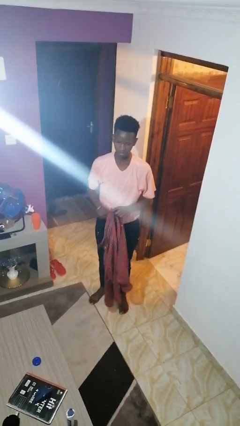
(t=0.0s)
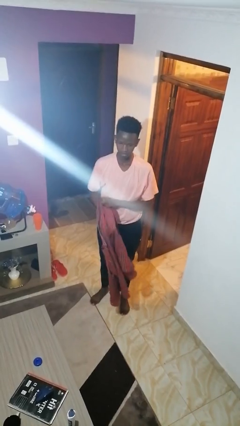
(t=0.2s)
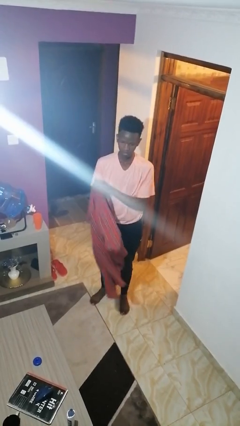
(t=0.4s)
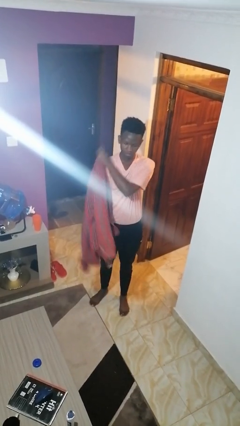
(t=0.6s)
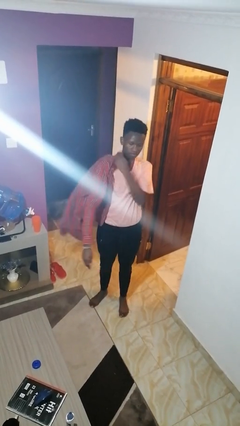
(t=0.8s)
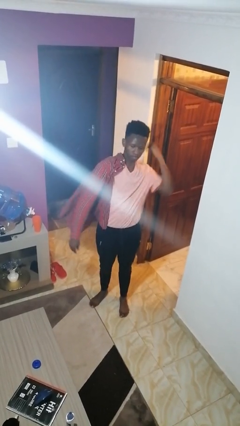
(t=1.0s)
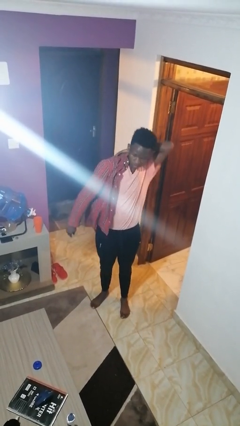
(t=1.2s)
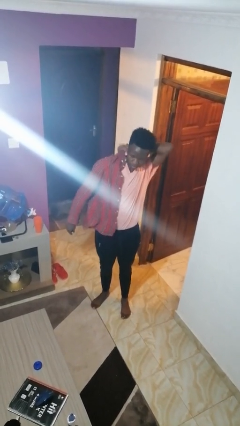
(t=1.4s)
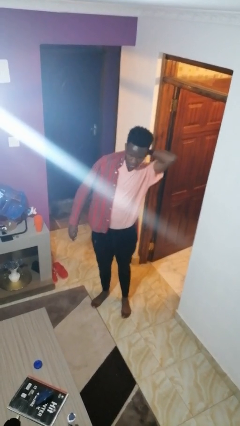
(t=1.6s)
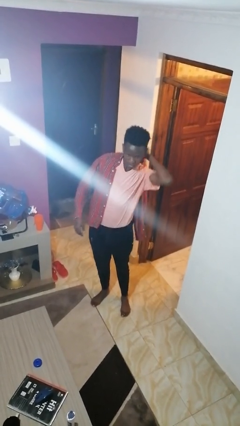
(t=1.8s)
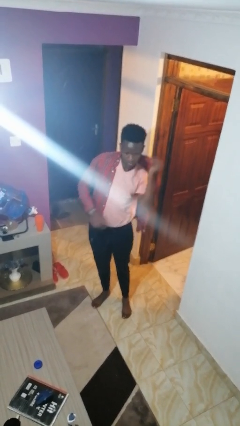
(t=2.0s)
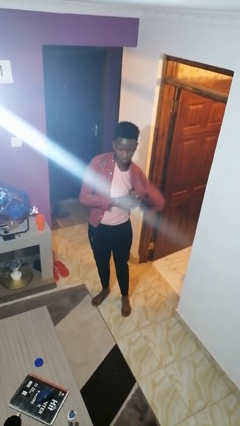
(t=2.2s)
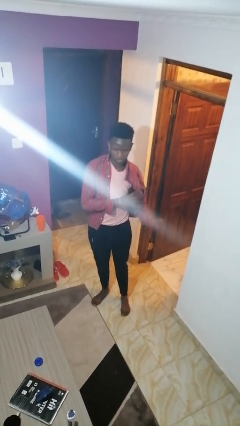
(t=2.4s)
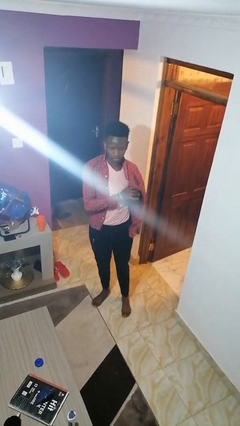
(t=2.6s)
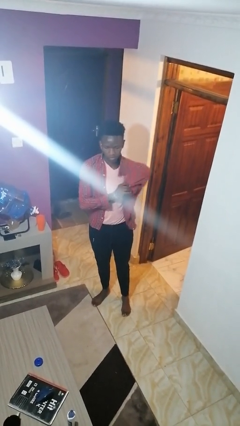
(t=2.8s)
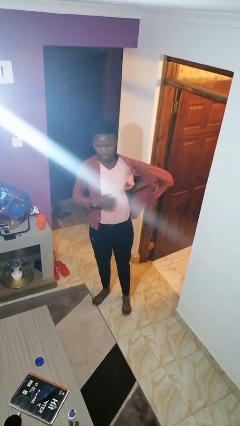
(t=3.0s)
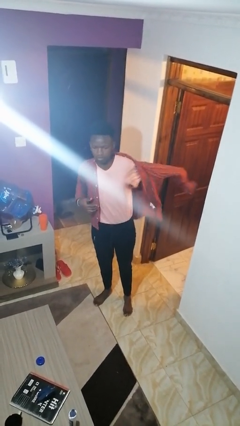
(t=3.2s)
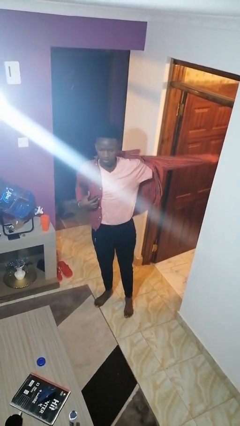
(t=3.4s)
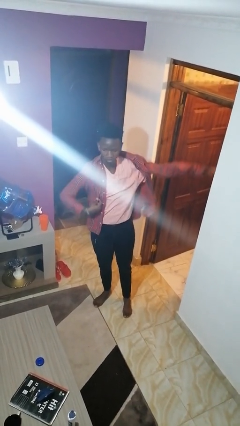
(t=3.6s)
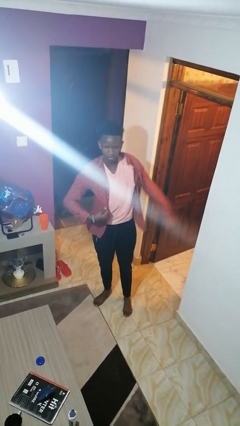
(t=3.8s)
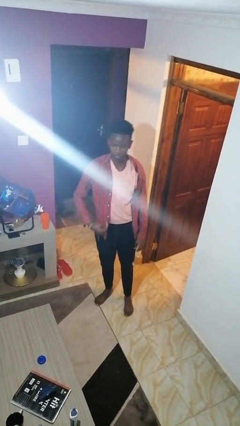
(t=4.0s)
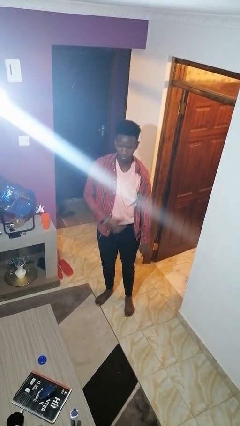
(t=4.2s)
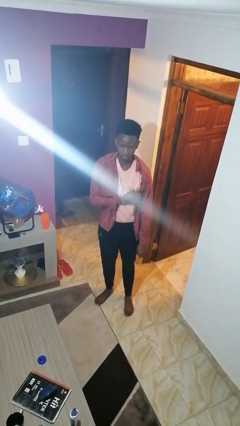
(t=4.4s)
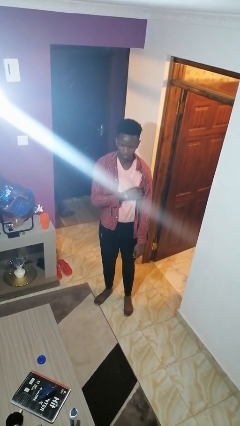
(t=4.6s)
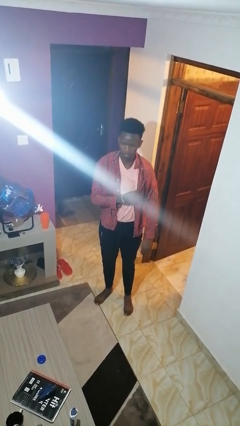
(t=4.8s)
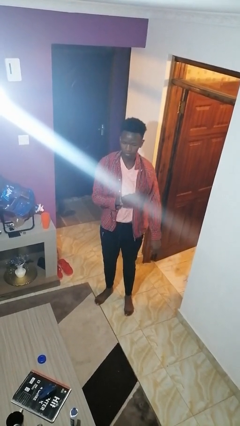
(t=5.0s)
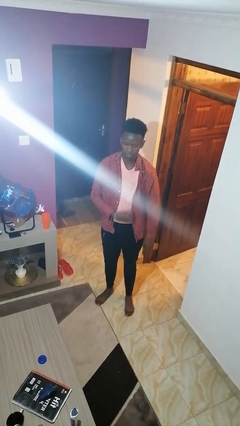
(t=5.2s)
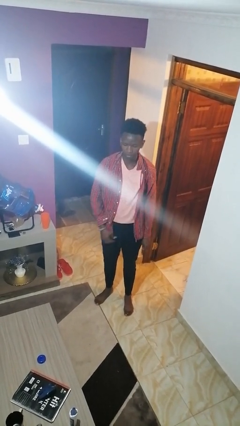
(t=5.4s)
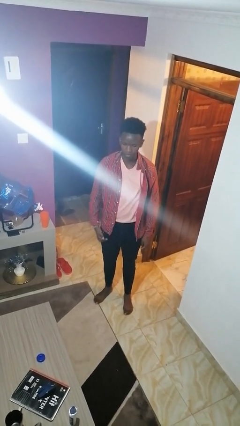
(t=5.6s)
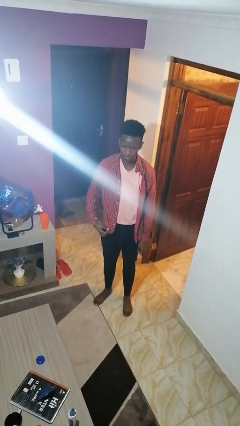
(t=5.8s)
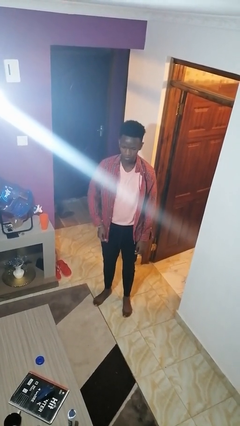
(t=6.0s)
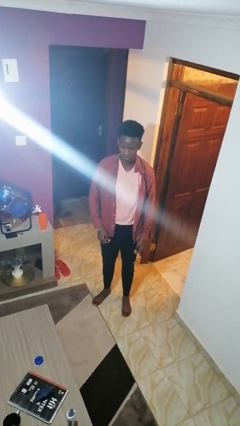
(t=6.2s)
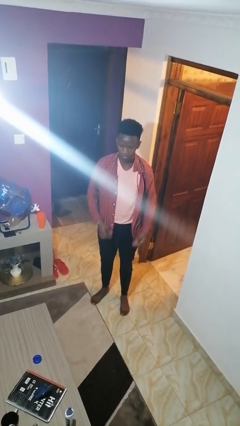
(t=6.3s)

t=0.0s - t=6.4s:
person puts on shirt

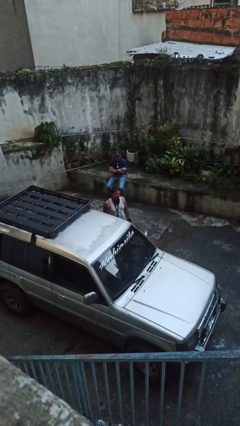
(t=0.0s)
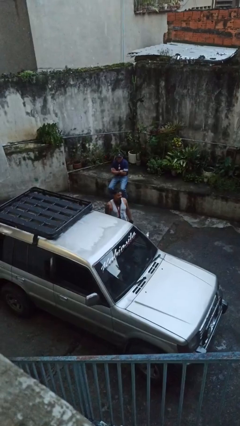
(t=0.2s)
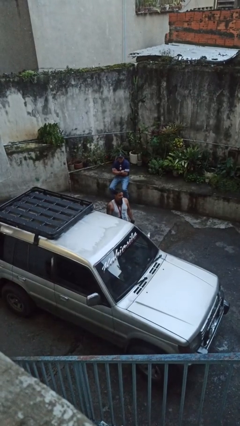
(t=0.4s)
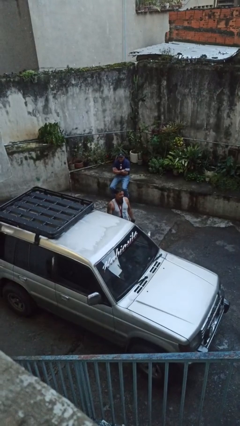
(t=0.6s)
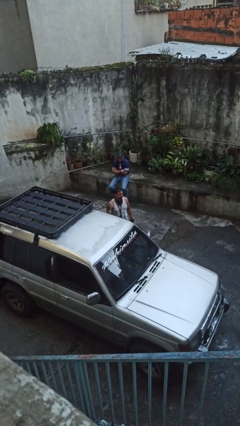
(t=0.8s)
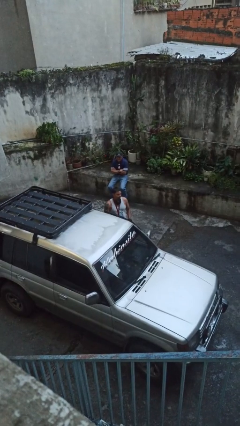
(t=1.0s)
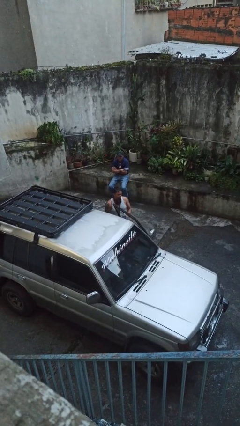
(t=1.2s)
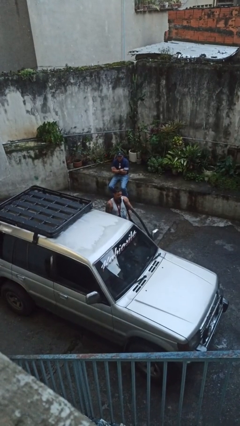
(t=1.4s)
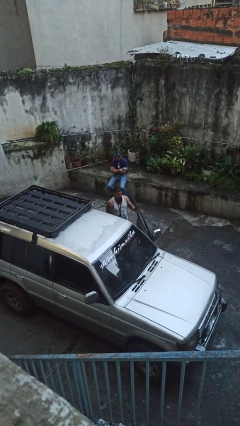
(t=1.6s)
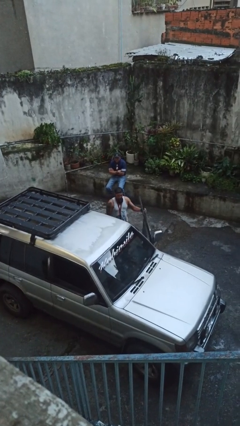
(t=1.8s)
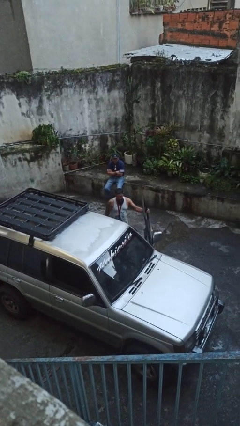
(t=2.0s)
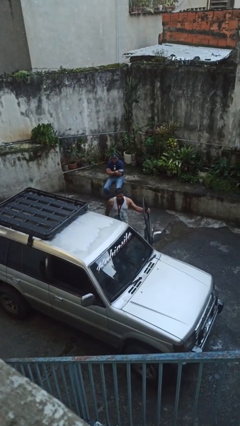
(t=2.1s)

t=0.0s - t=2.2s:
person opens car door

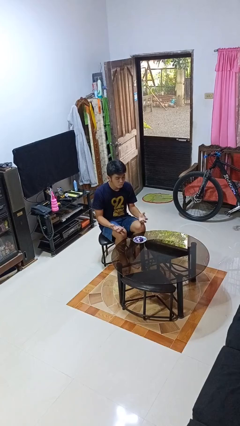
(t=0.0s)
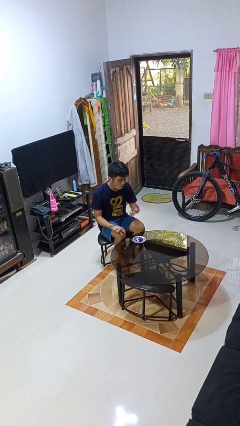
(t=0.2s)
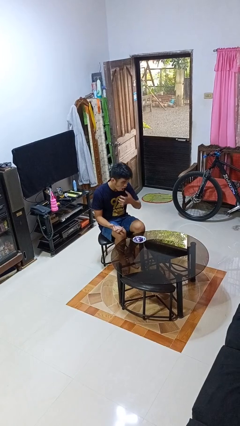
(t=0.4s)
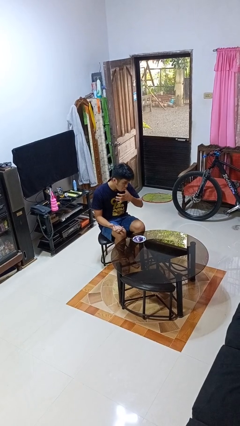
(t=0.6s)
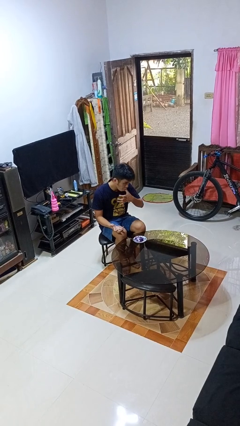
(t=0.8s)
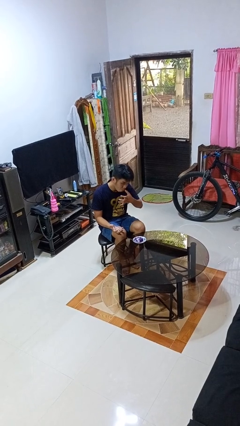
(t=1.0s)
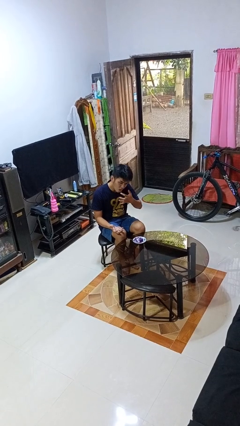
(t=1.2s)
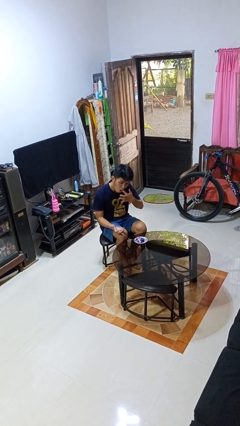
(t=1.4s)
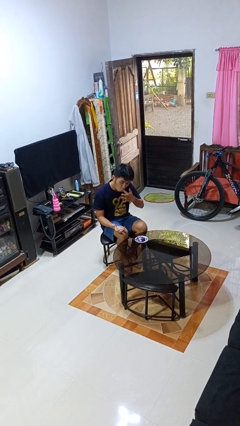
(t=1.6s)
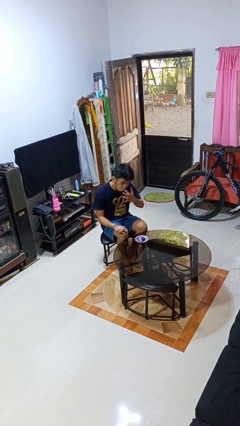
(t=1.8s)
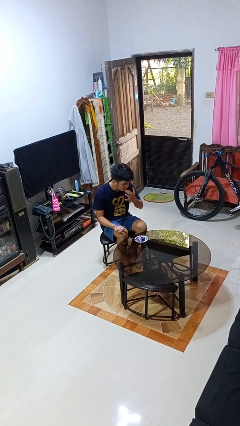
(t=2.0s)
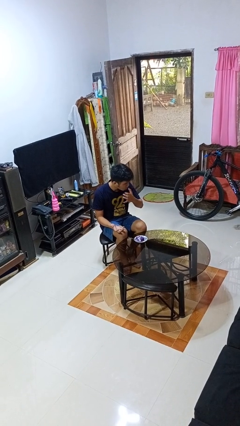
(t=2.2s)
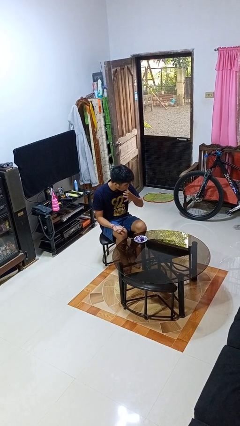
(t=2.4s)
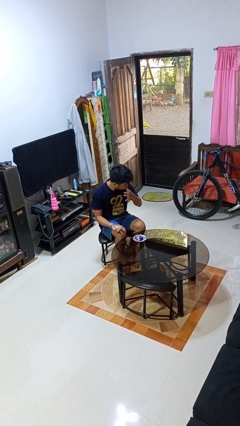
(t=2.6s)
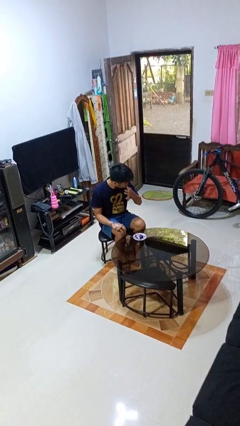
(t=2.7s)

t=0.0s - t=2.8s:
person licks fingers

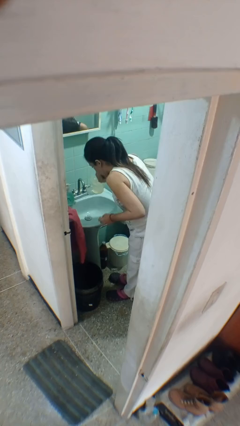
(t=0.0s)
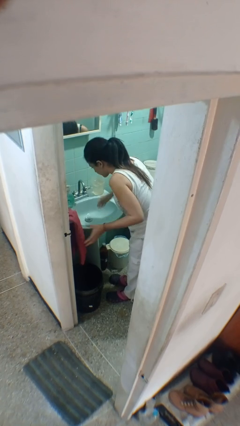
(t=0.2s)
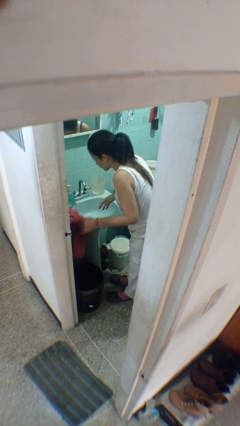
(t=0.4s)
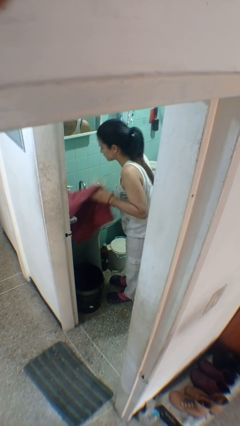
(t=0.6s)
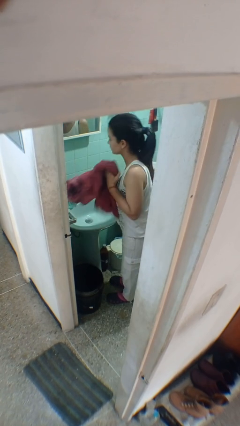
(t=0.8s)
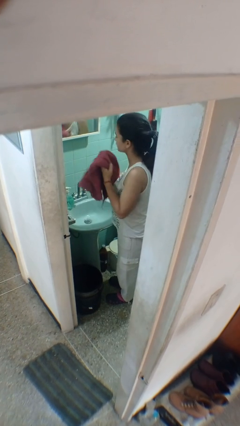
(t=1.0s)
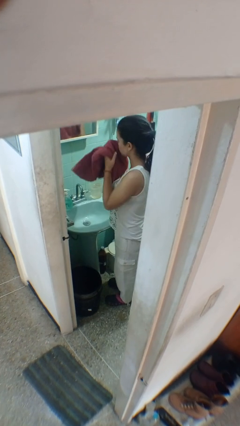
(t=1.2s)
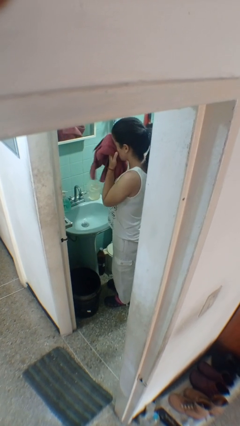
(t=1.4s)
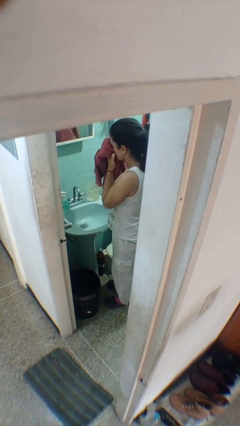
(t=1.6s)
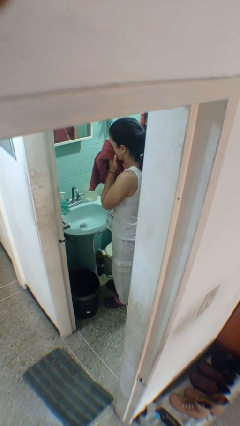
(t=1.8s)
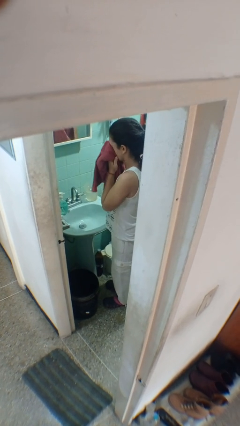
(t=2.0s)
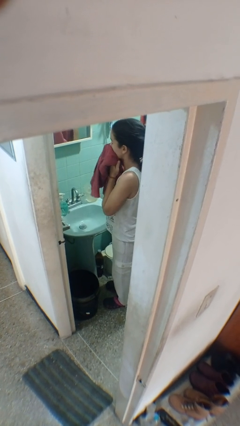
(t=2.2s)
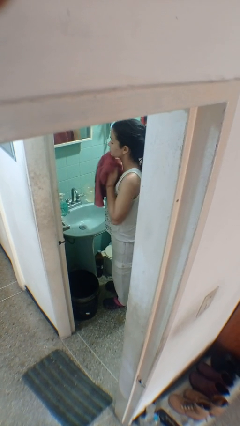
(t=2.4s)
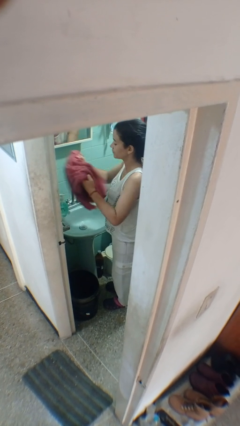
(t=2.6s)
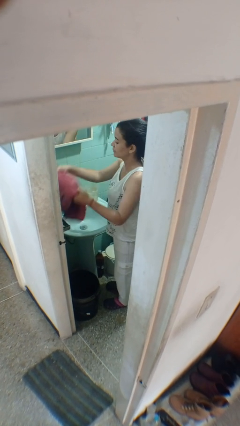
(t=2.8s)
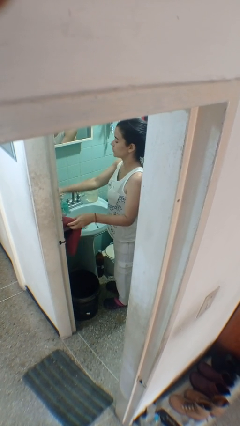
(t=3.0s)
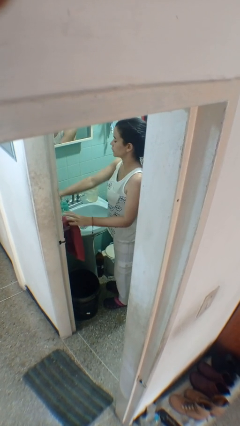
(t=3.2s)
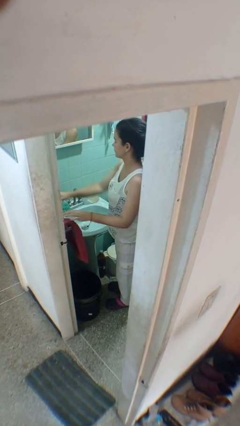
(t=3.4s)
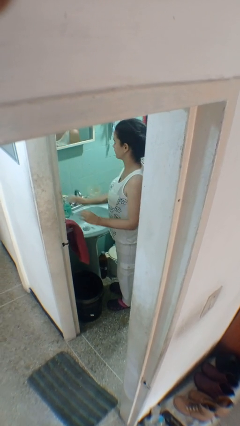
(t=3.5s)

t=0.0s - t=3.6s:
person dries face with towel

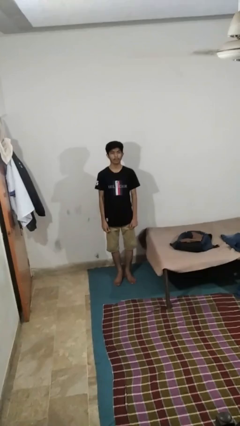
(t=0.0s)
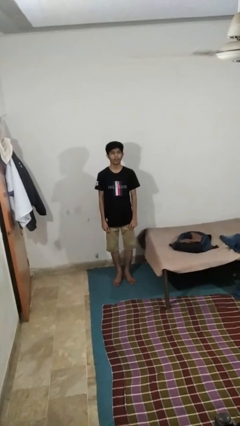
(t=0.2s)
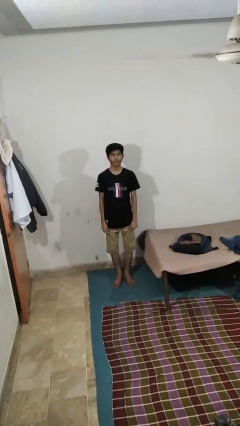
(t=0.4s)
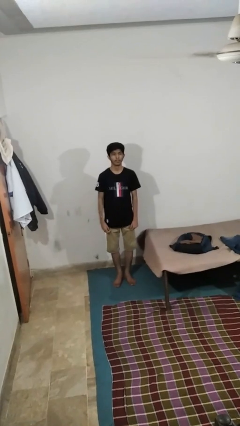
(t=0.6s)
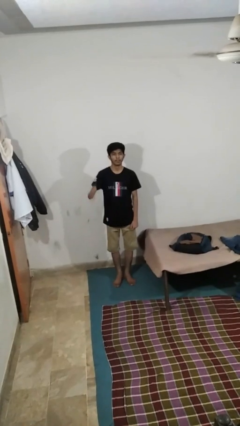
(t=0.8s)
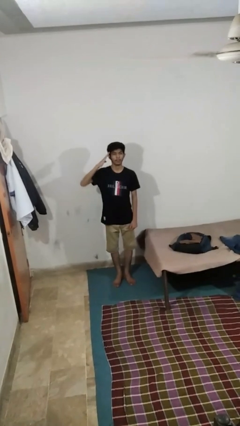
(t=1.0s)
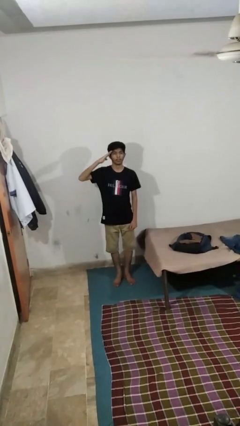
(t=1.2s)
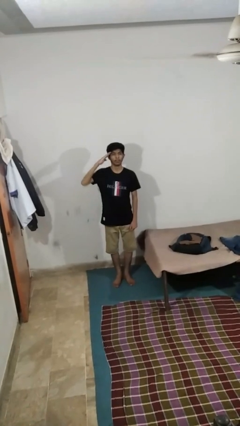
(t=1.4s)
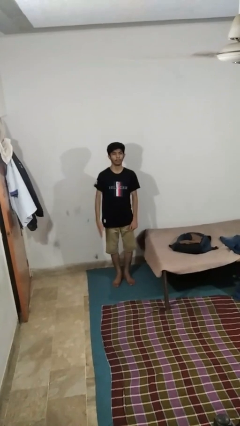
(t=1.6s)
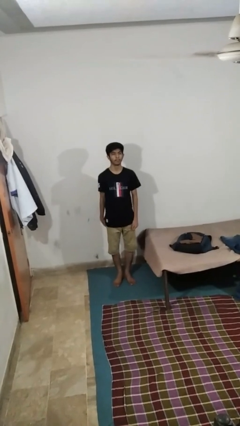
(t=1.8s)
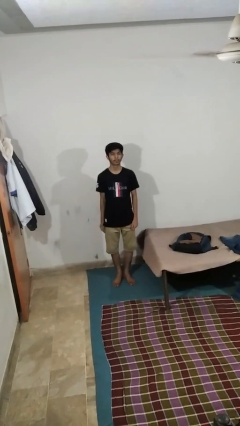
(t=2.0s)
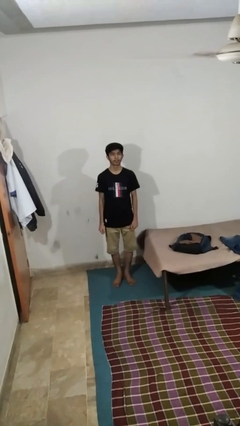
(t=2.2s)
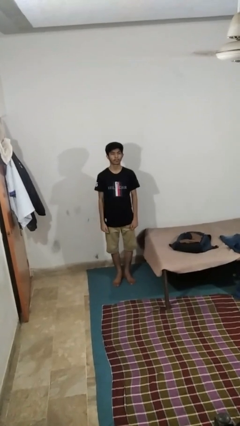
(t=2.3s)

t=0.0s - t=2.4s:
person salutes

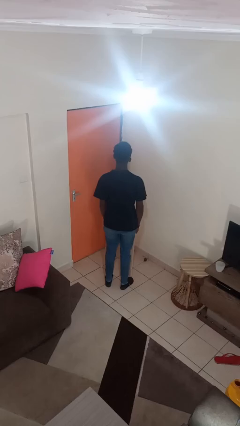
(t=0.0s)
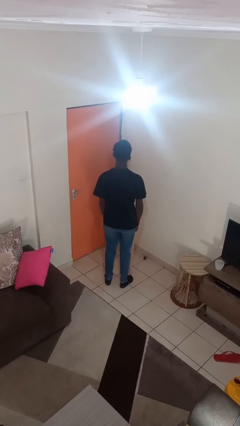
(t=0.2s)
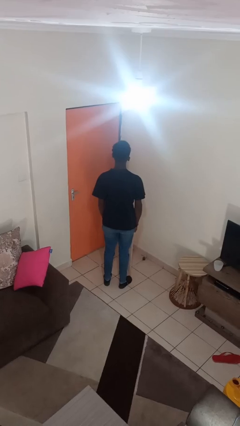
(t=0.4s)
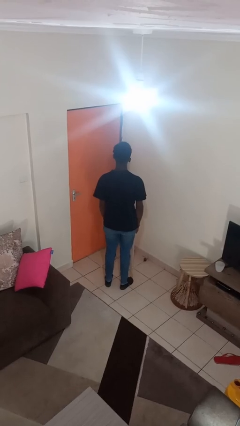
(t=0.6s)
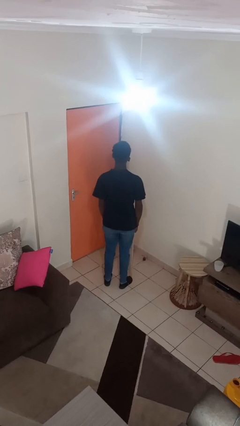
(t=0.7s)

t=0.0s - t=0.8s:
person puts on necktie
